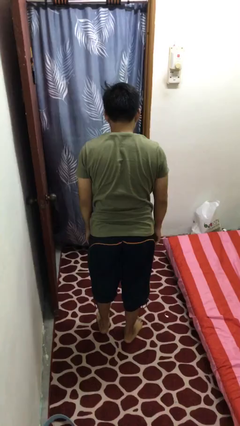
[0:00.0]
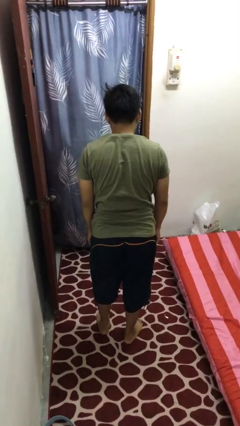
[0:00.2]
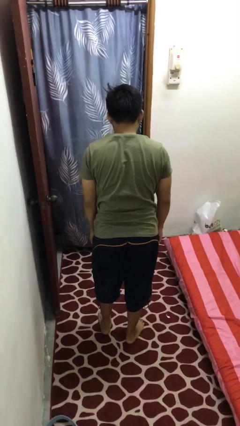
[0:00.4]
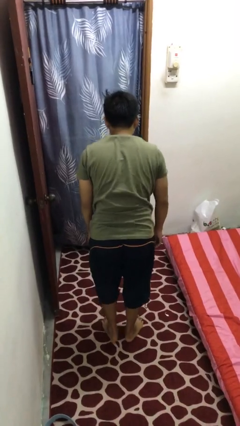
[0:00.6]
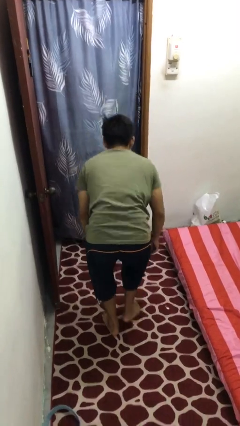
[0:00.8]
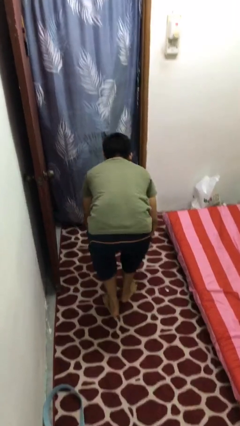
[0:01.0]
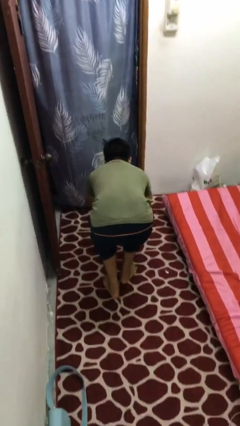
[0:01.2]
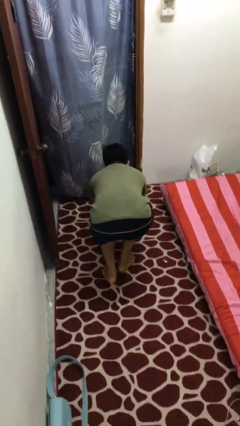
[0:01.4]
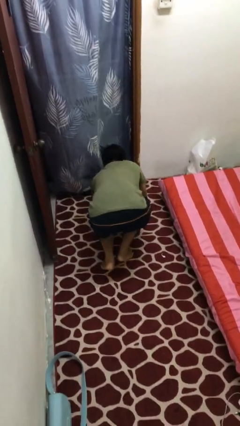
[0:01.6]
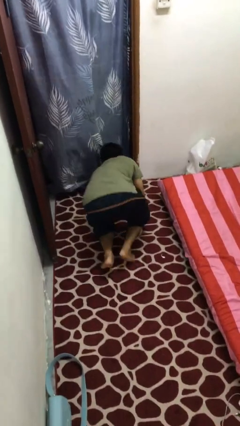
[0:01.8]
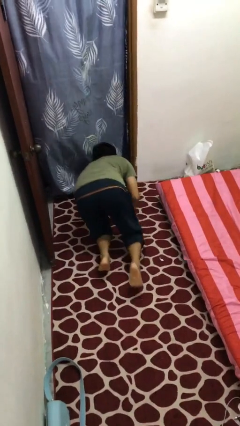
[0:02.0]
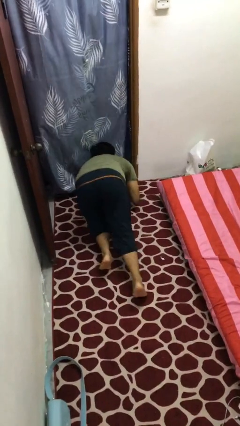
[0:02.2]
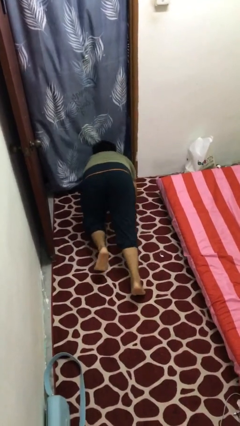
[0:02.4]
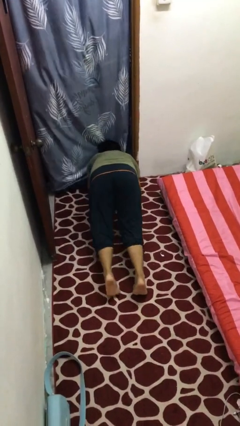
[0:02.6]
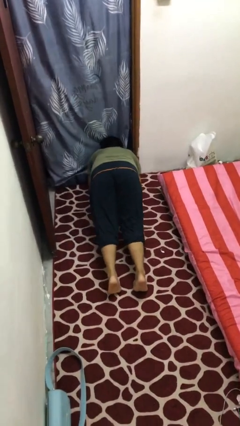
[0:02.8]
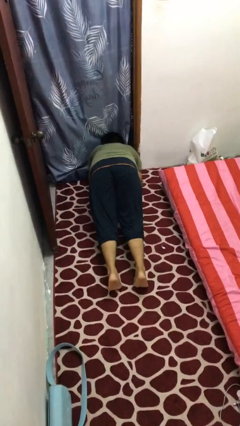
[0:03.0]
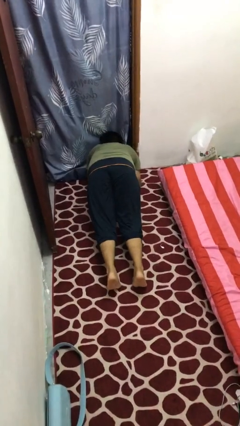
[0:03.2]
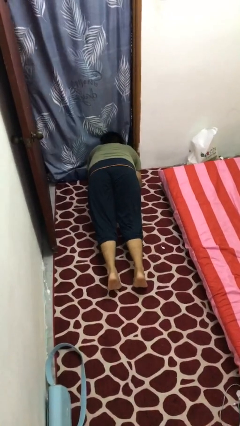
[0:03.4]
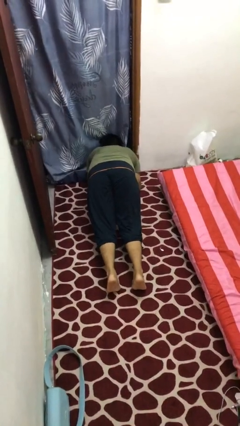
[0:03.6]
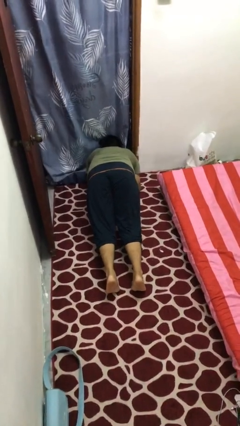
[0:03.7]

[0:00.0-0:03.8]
person exercises with plank

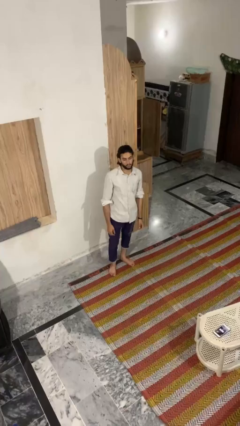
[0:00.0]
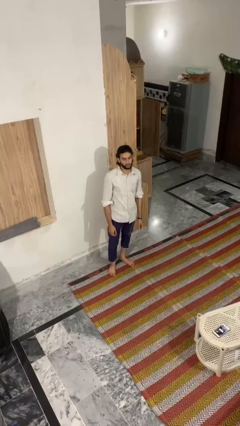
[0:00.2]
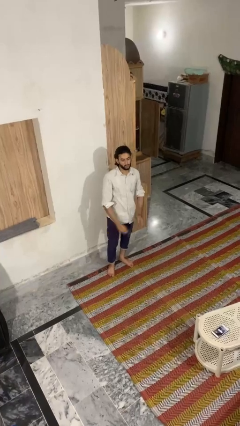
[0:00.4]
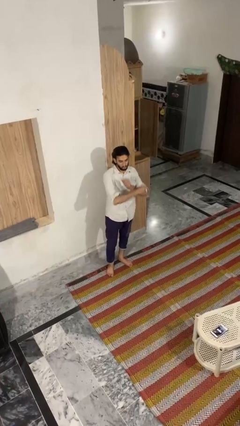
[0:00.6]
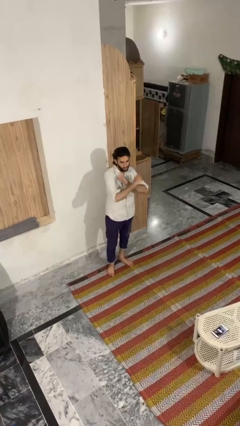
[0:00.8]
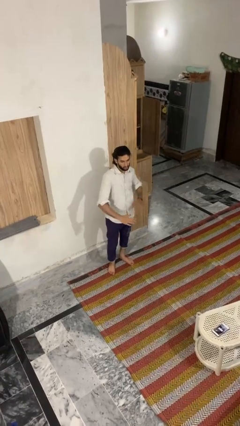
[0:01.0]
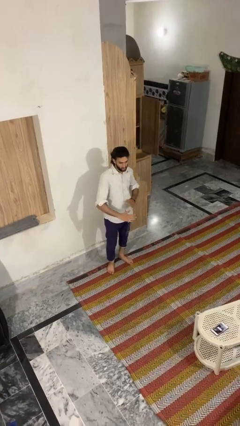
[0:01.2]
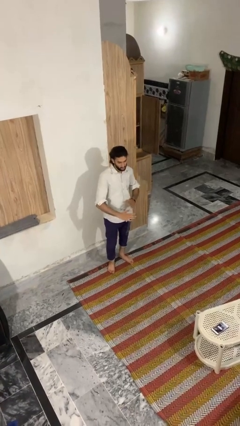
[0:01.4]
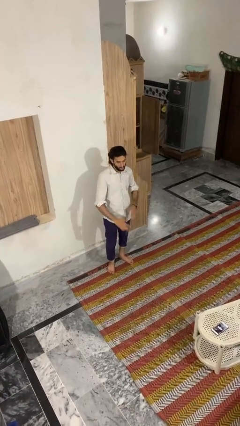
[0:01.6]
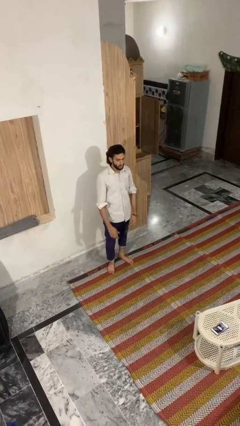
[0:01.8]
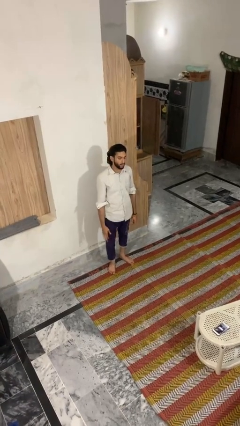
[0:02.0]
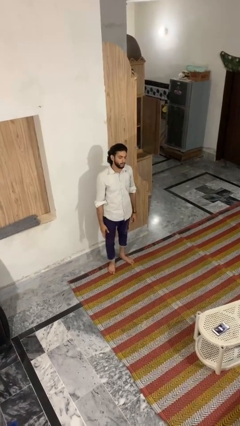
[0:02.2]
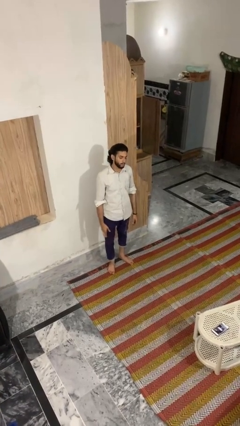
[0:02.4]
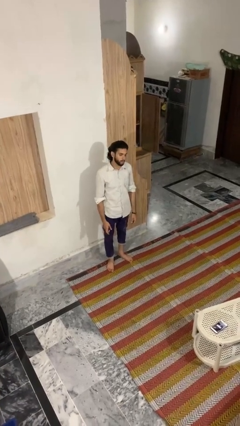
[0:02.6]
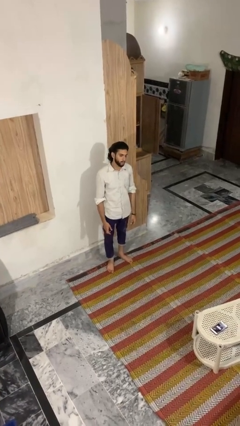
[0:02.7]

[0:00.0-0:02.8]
person karate chop

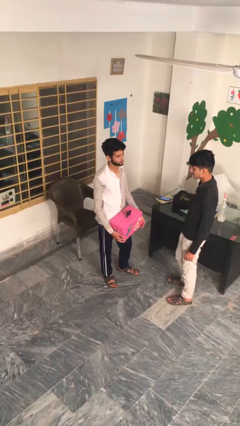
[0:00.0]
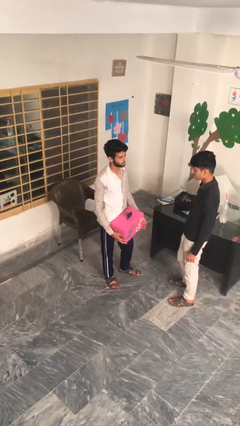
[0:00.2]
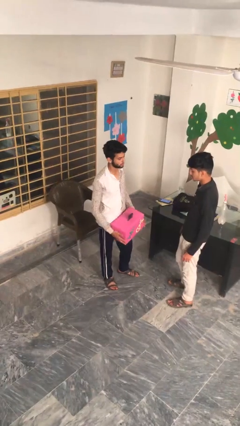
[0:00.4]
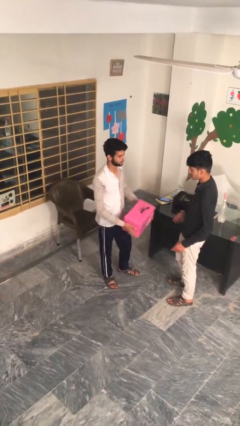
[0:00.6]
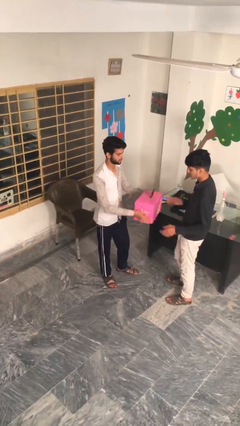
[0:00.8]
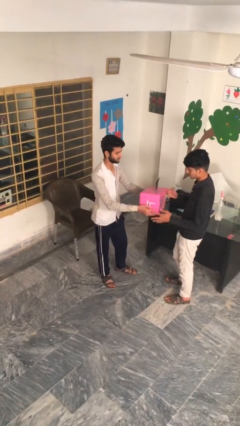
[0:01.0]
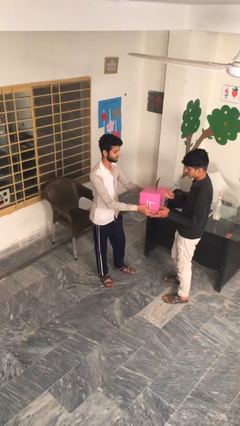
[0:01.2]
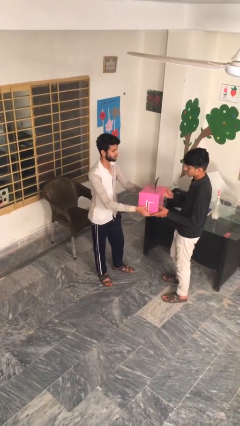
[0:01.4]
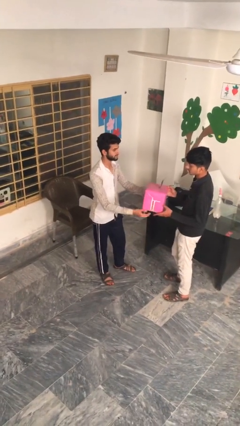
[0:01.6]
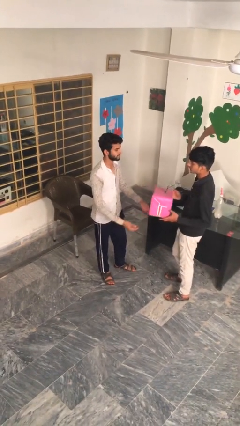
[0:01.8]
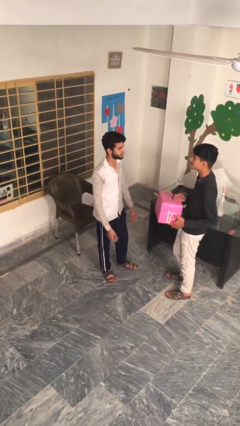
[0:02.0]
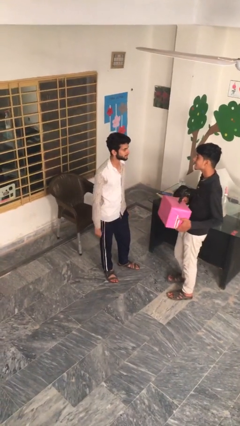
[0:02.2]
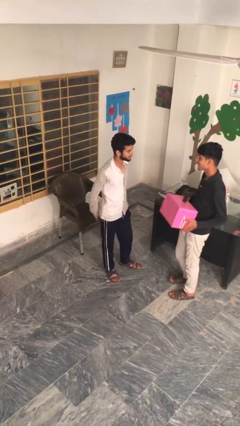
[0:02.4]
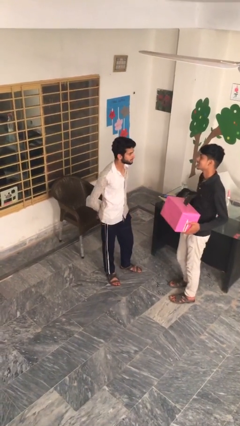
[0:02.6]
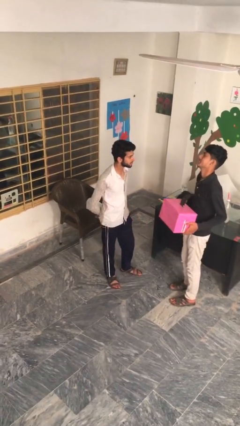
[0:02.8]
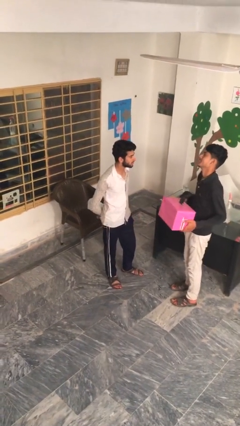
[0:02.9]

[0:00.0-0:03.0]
person transfers object to person

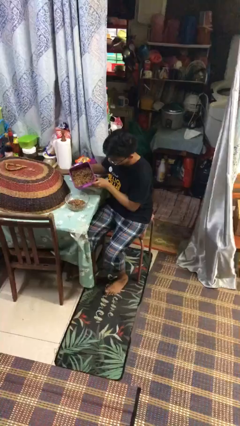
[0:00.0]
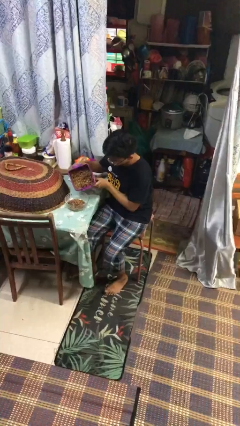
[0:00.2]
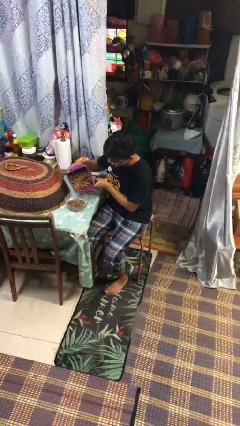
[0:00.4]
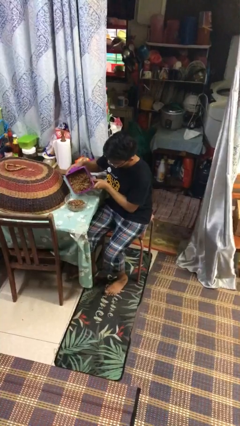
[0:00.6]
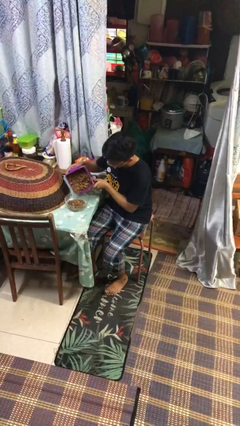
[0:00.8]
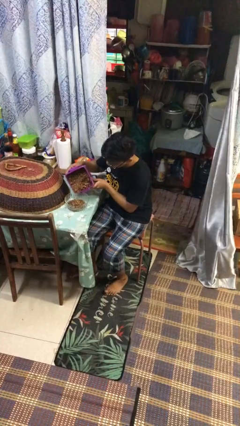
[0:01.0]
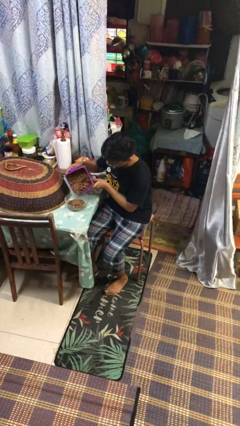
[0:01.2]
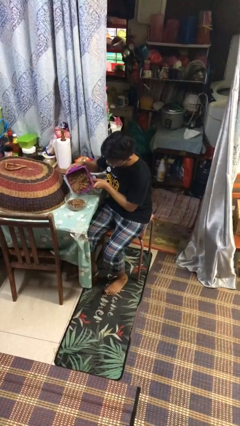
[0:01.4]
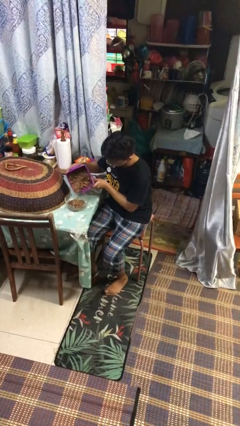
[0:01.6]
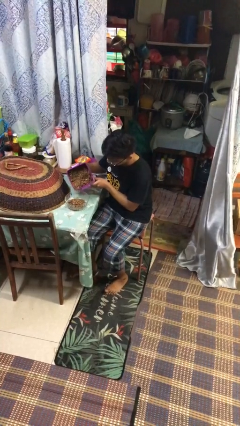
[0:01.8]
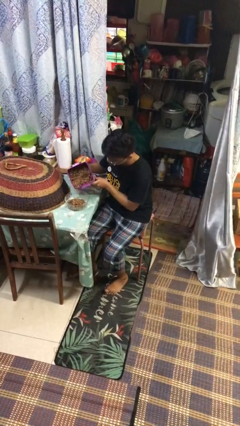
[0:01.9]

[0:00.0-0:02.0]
person pours into bowl

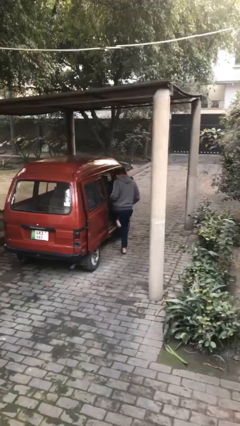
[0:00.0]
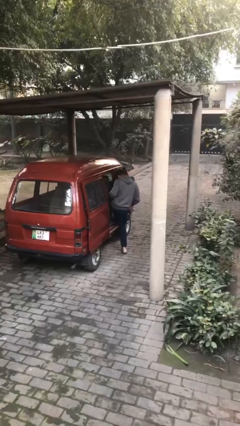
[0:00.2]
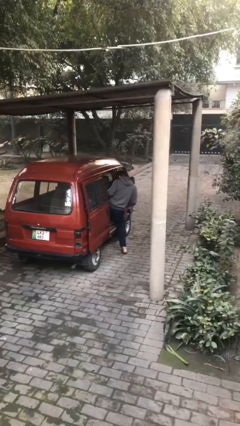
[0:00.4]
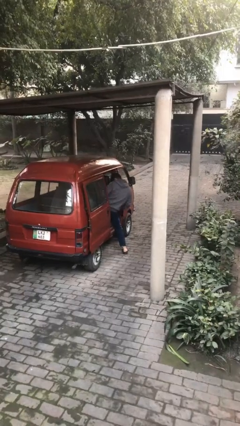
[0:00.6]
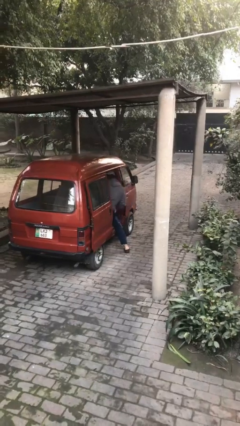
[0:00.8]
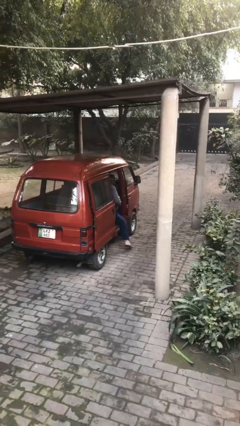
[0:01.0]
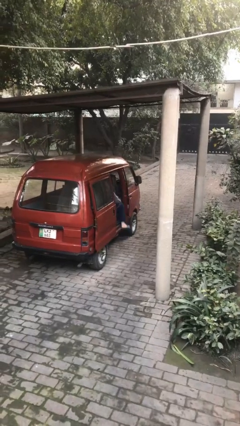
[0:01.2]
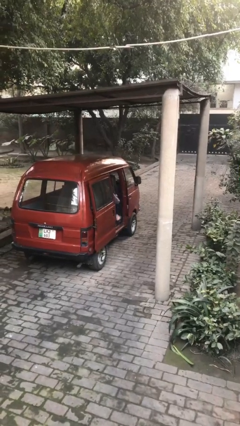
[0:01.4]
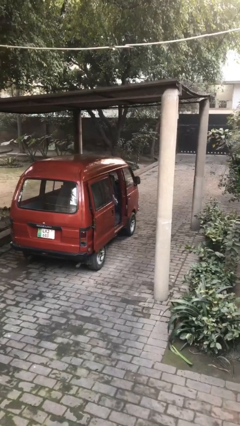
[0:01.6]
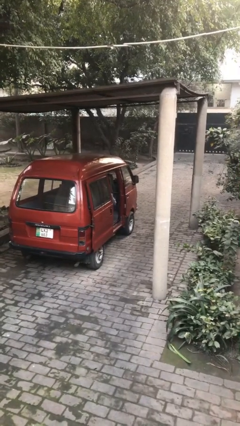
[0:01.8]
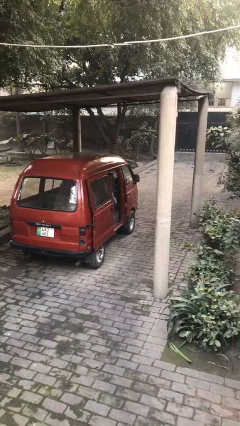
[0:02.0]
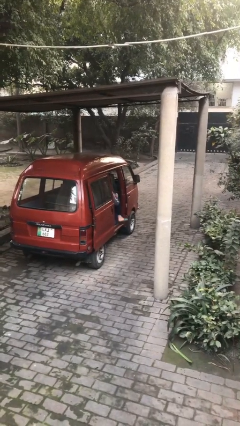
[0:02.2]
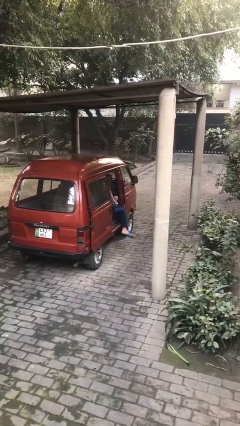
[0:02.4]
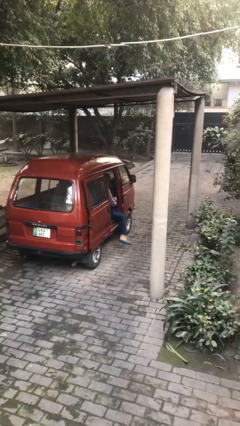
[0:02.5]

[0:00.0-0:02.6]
person enters car

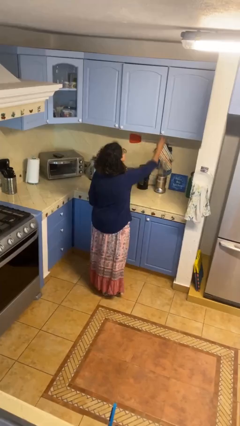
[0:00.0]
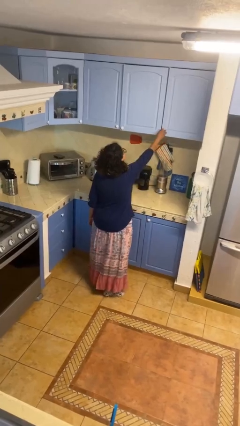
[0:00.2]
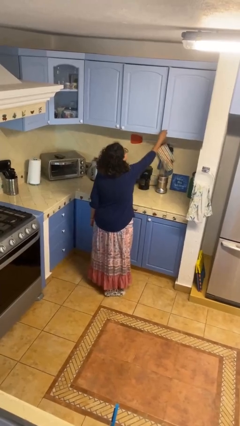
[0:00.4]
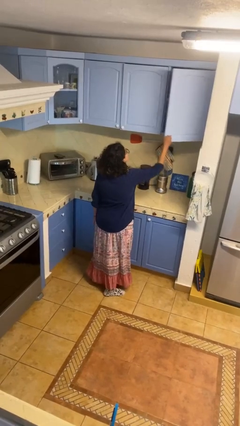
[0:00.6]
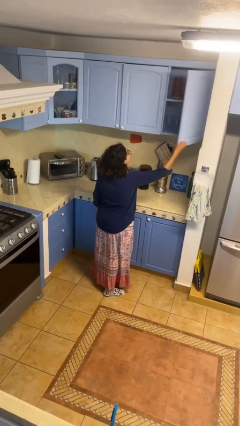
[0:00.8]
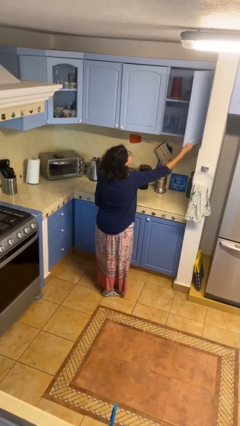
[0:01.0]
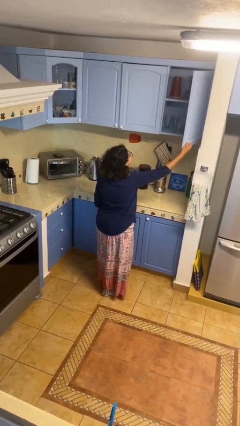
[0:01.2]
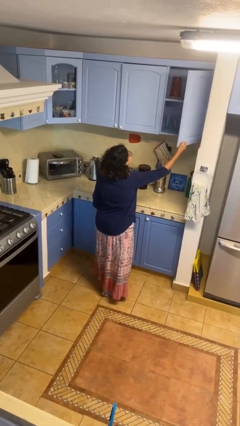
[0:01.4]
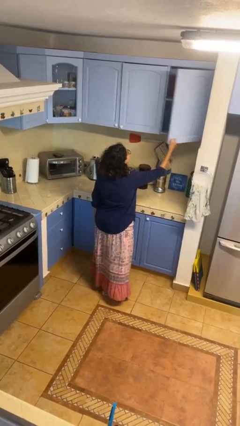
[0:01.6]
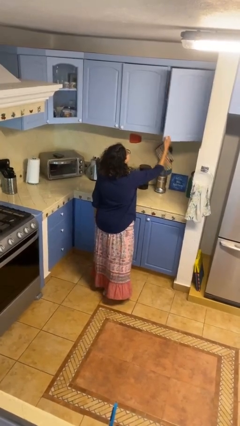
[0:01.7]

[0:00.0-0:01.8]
person opens cabinet

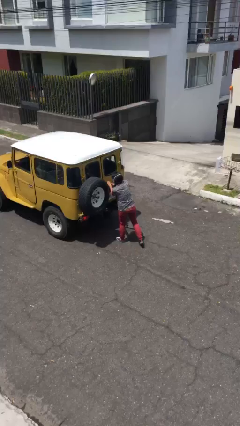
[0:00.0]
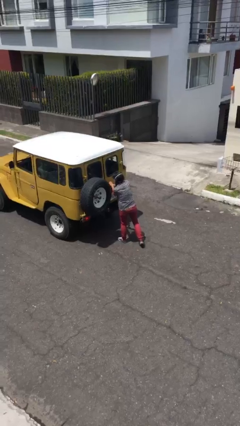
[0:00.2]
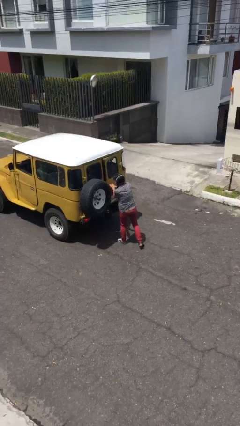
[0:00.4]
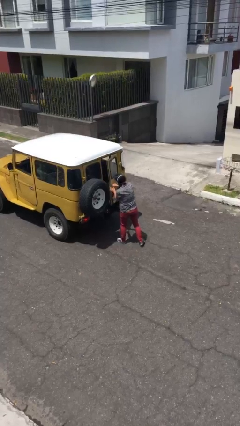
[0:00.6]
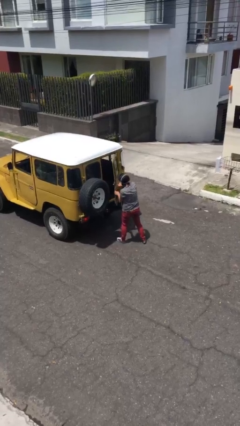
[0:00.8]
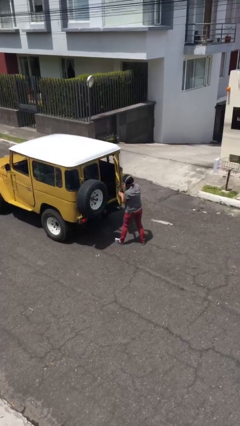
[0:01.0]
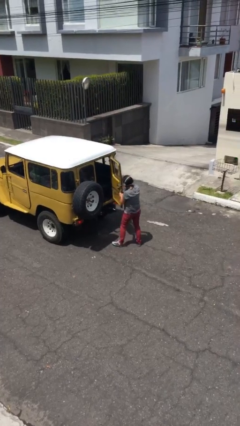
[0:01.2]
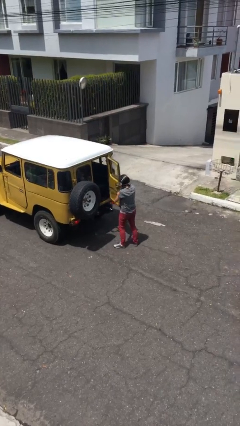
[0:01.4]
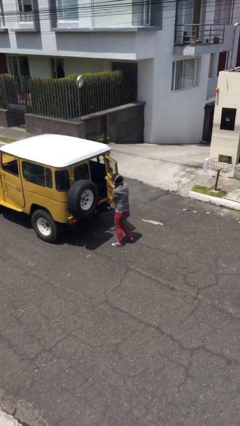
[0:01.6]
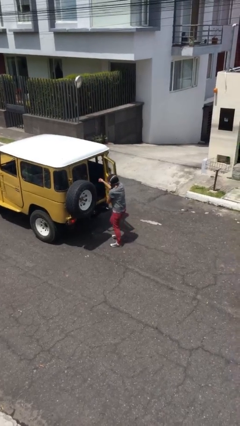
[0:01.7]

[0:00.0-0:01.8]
person opens car door
